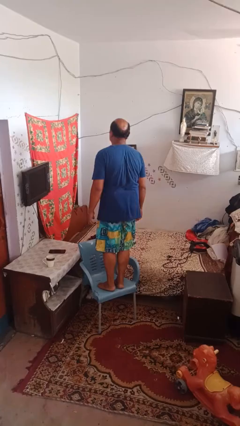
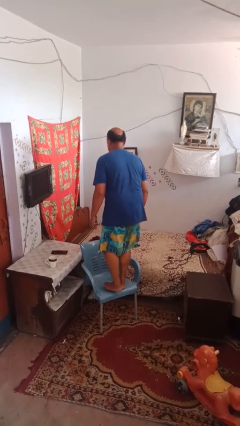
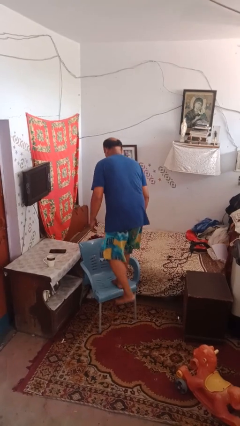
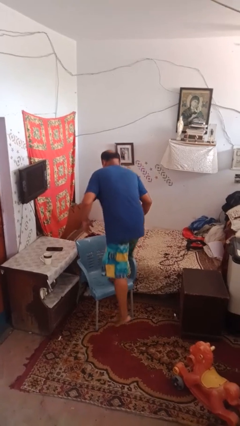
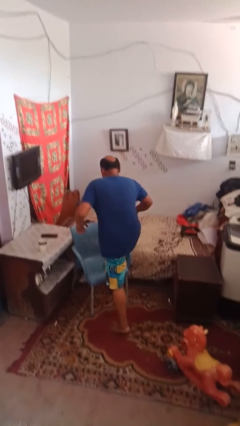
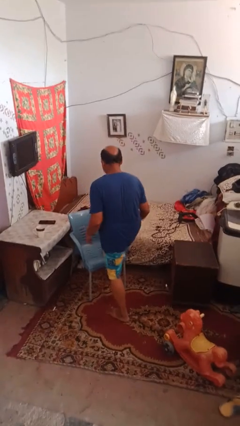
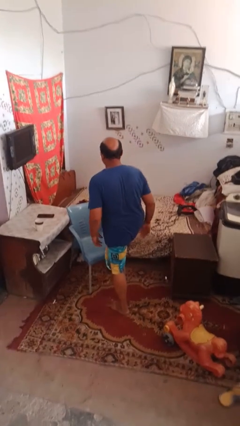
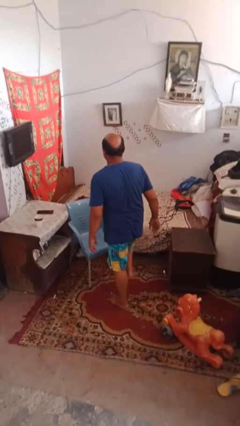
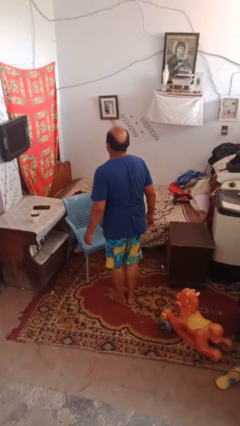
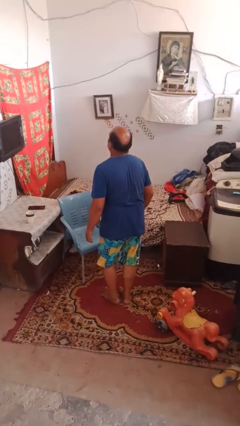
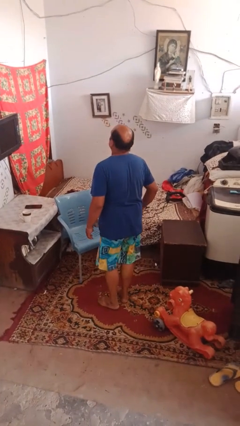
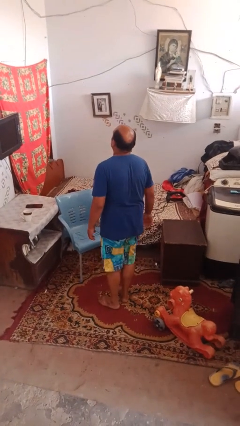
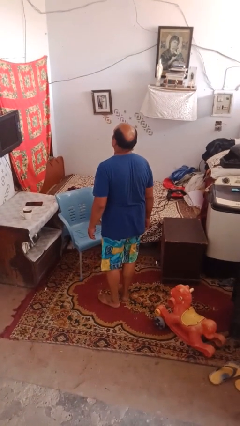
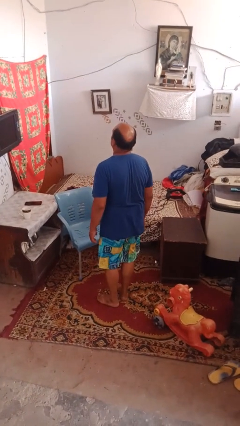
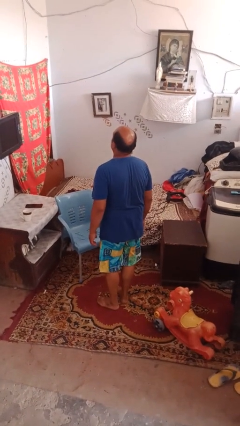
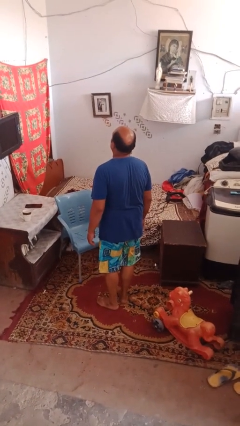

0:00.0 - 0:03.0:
person climbs off chair

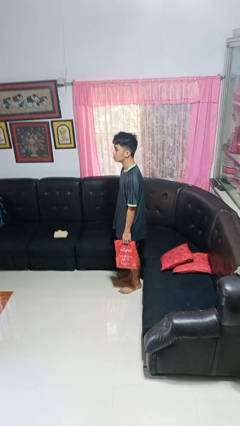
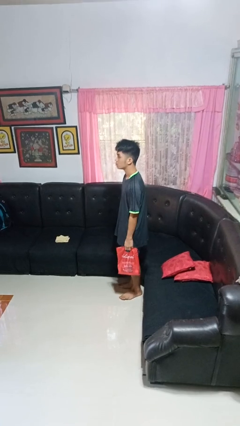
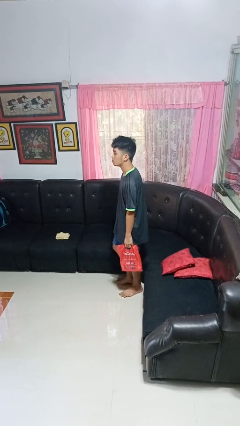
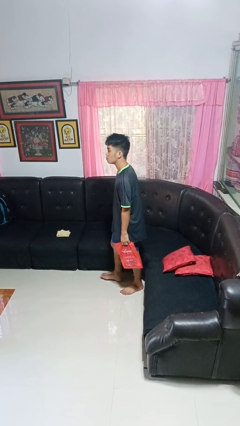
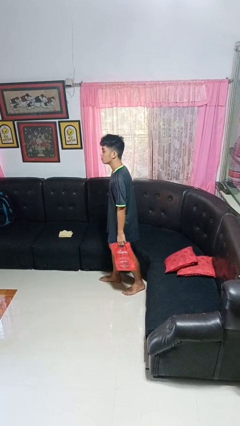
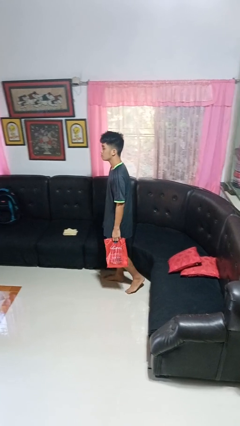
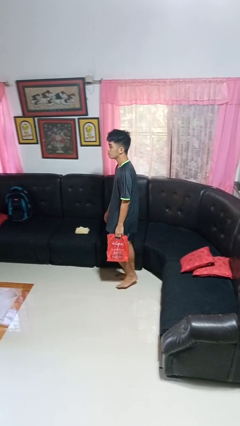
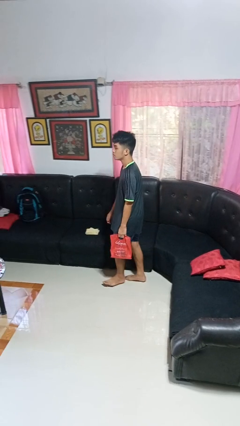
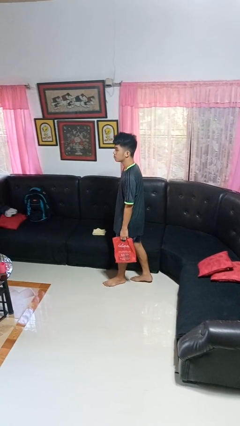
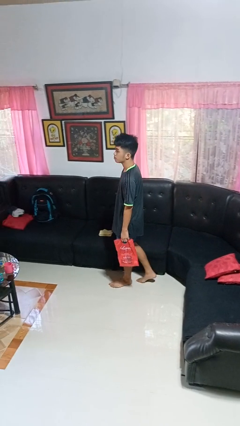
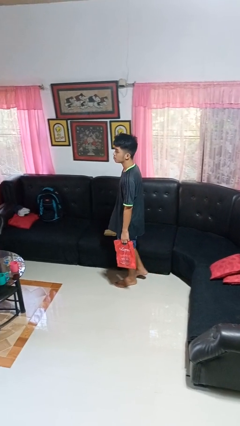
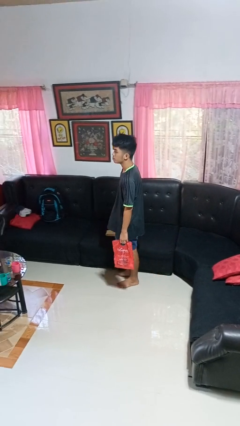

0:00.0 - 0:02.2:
person carries groceries

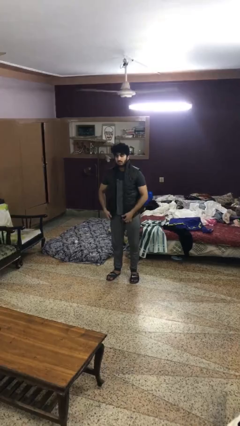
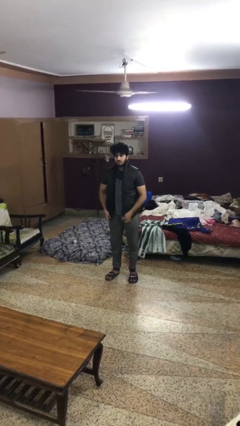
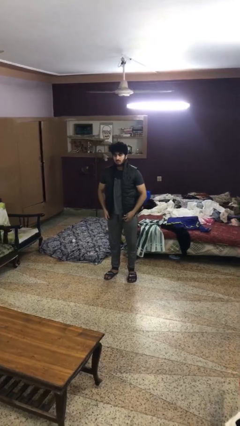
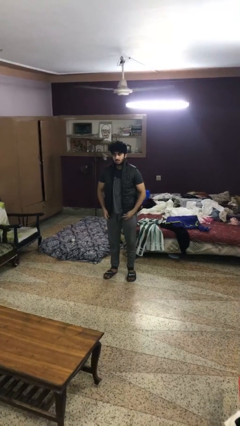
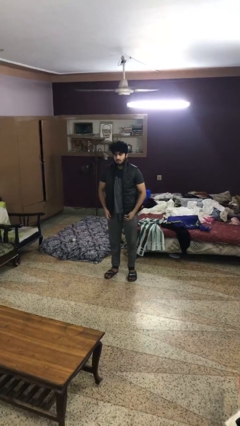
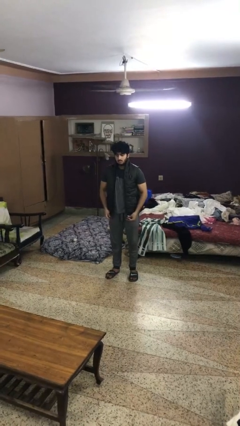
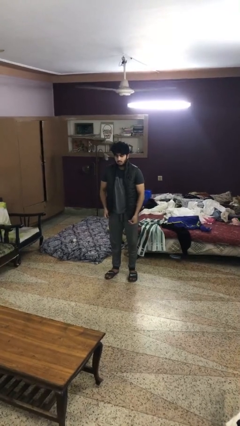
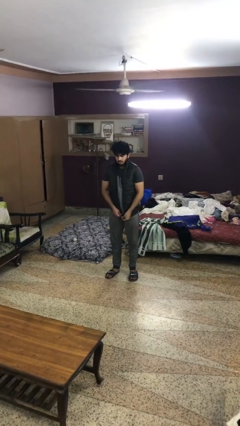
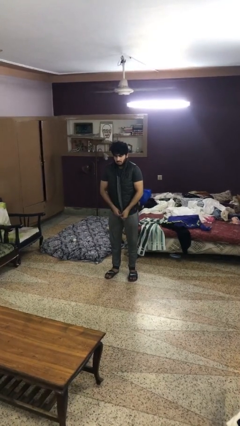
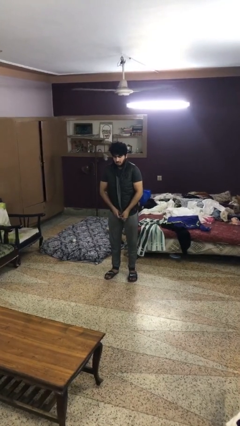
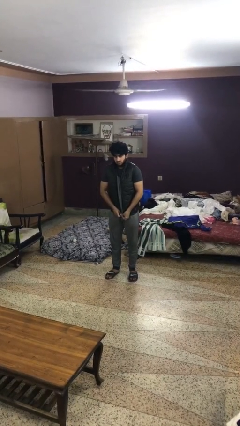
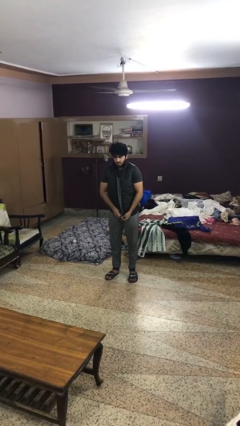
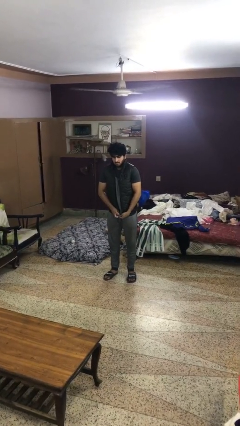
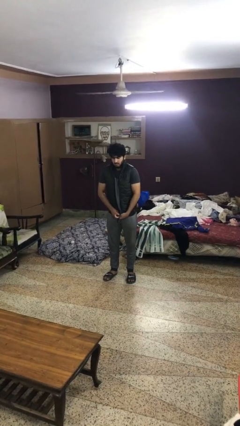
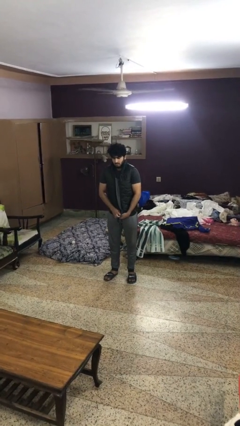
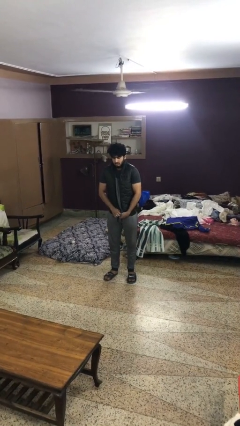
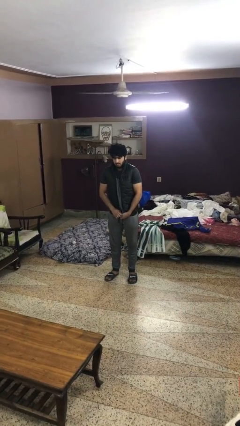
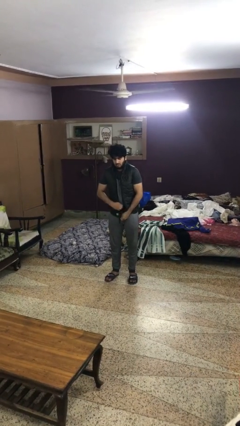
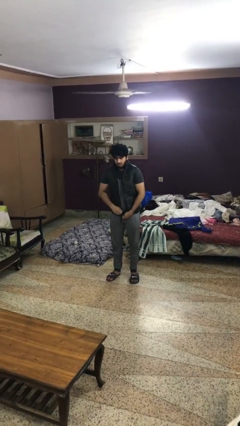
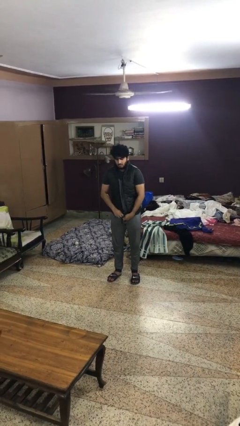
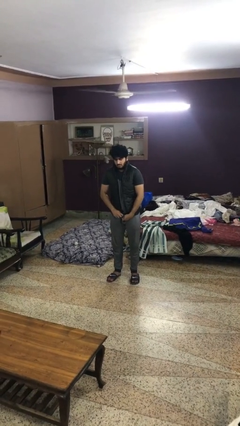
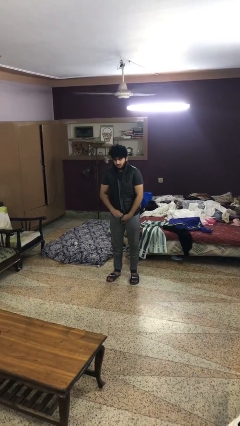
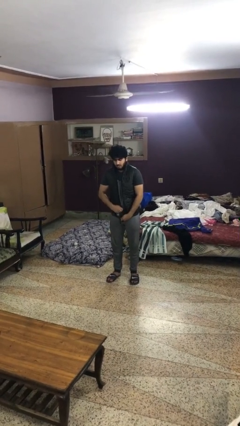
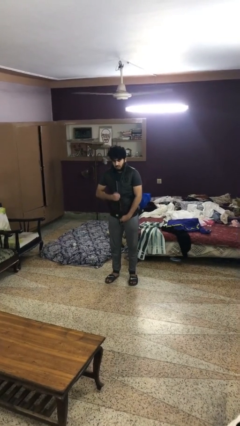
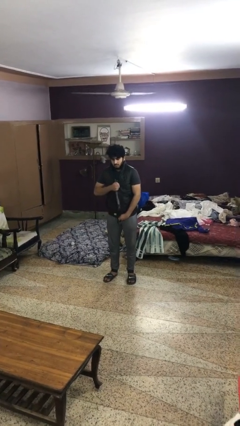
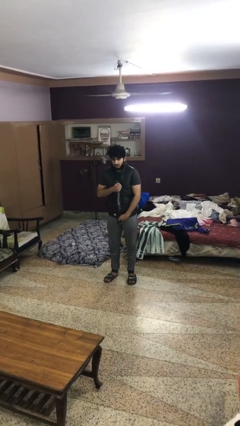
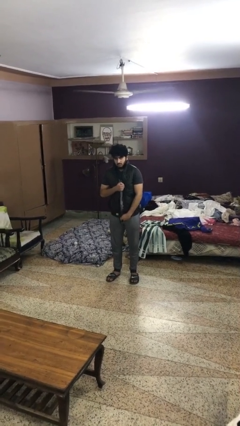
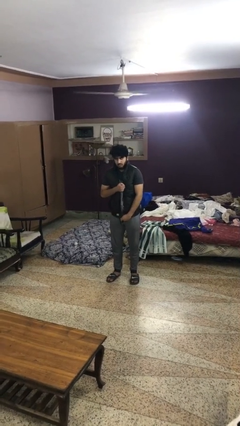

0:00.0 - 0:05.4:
person zips up jacket

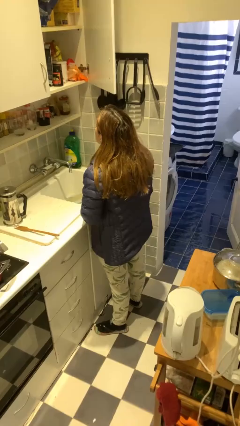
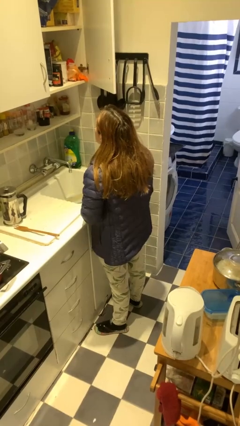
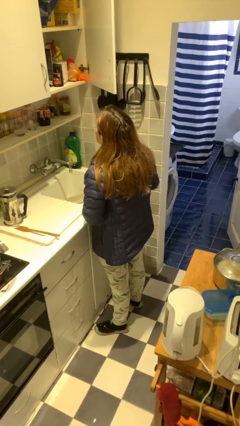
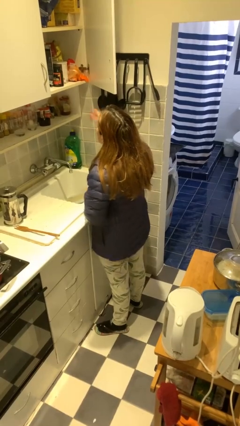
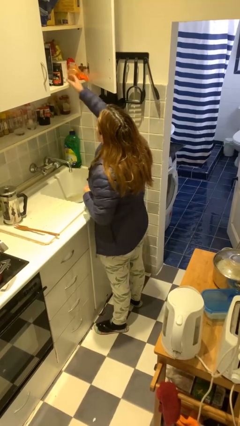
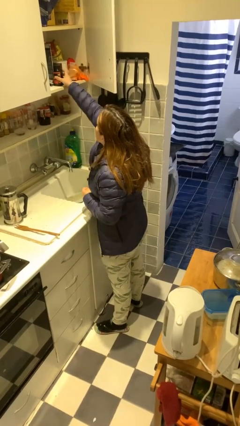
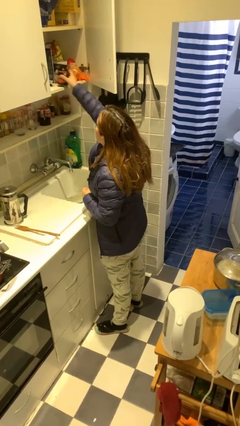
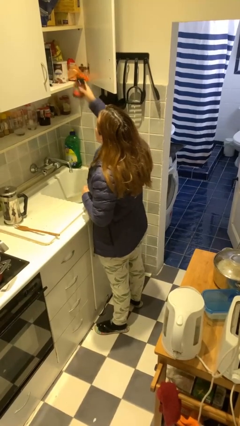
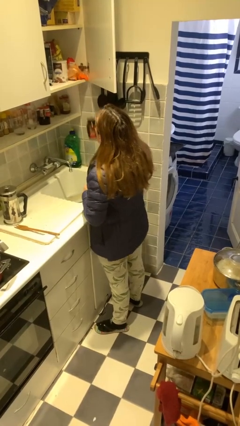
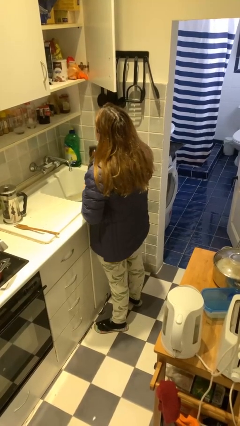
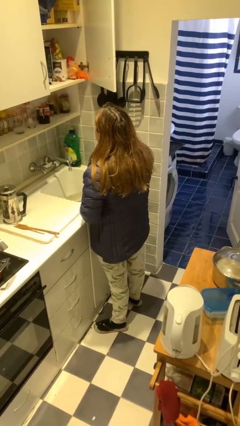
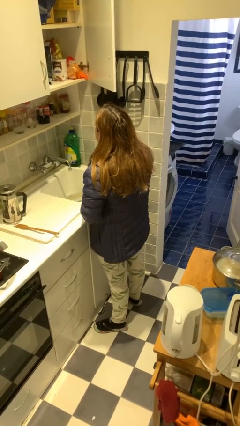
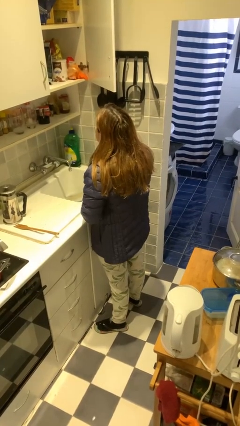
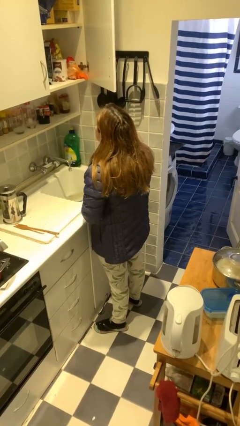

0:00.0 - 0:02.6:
person takes object from cabinet

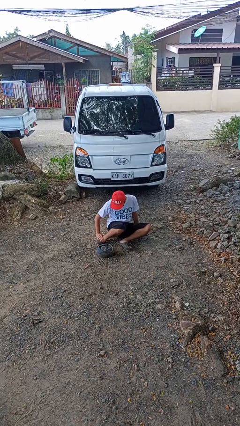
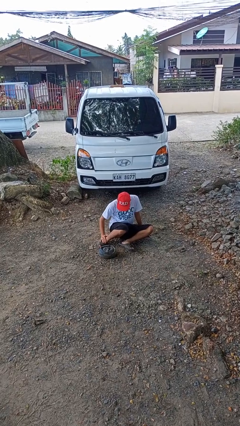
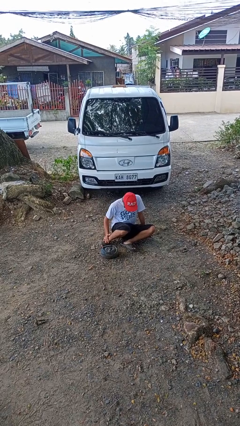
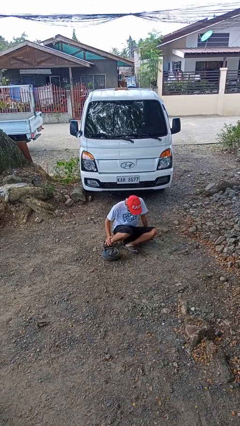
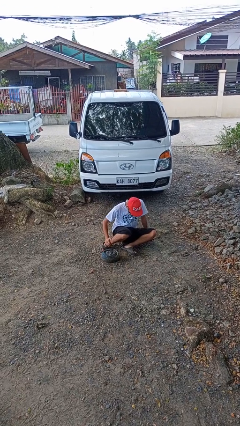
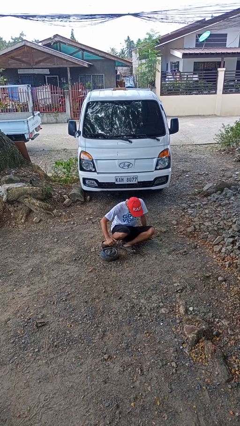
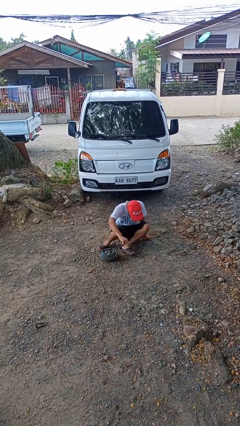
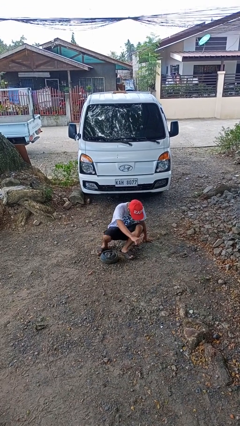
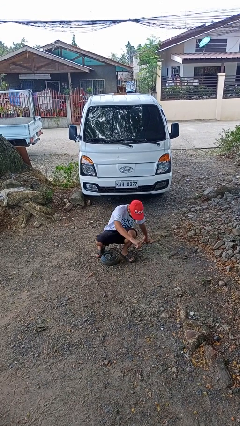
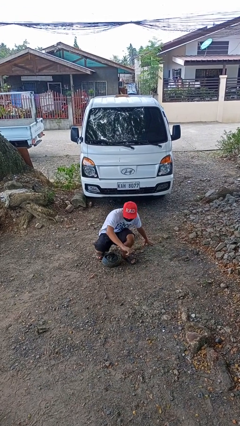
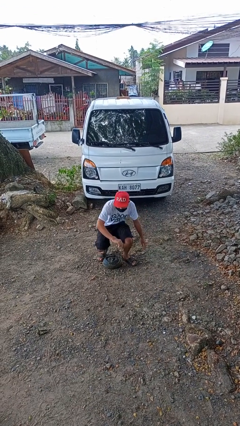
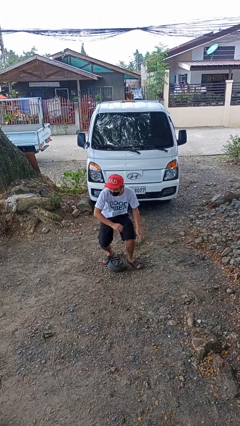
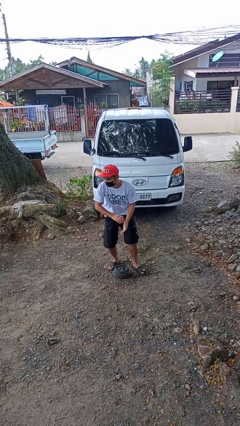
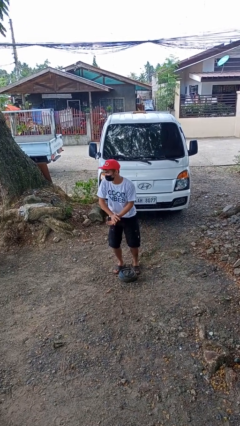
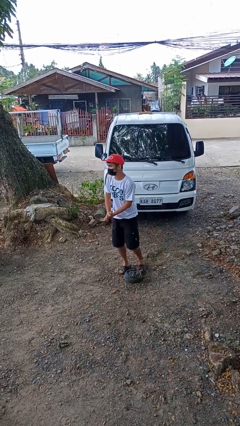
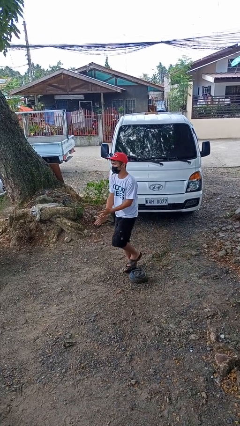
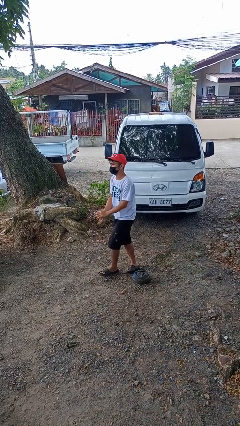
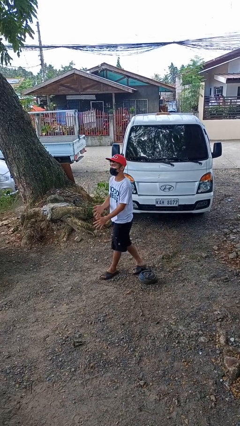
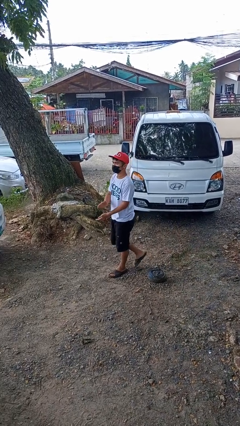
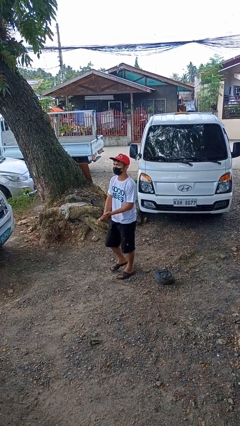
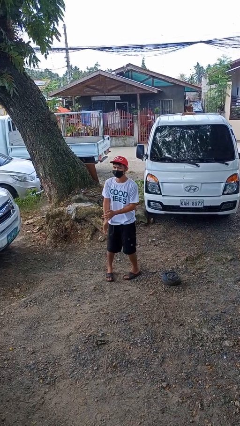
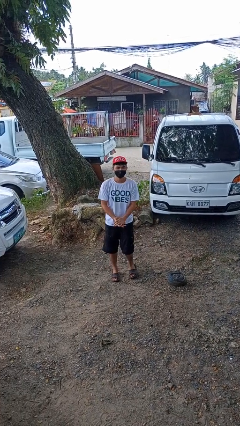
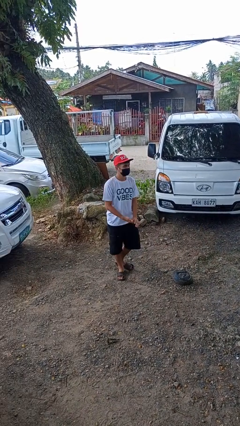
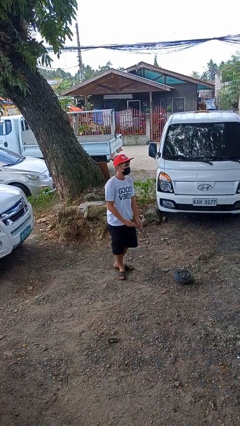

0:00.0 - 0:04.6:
person stands up from floor

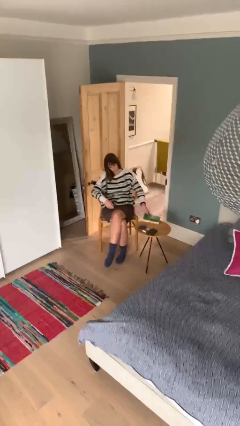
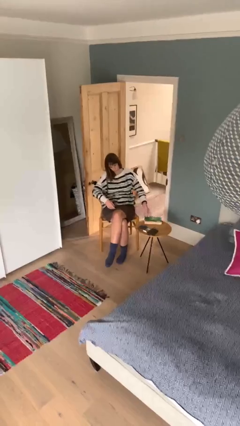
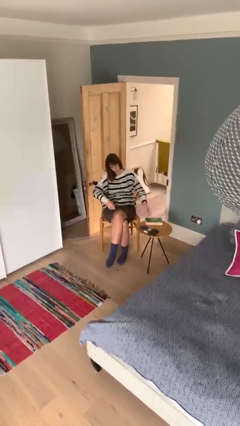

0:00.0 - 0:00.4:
person puts down object on table
